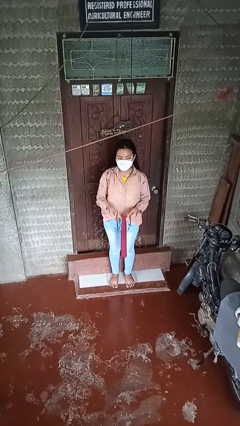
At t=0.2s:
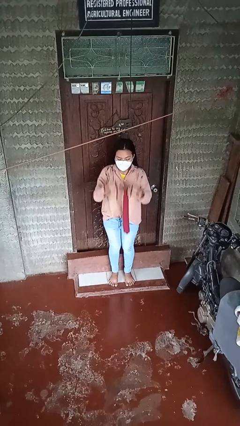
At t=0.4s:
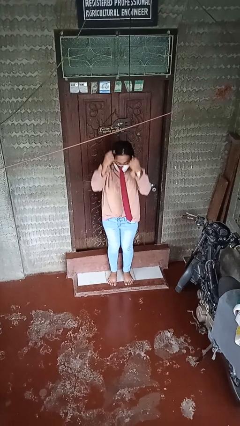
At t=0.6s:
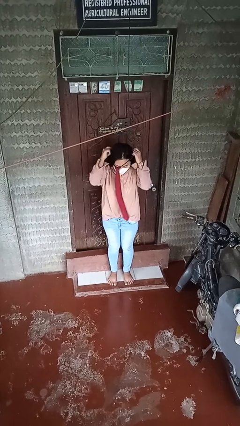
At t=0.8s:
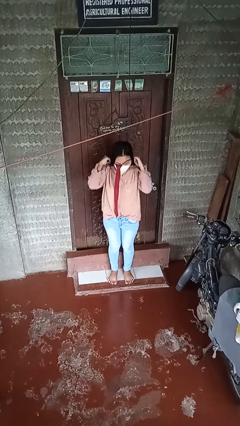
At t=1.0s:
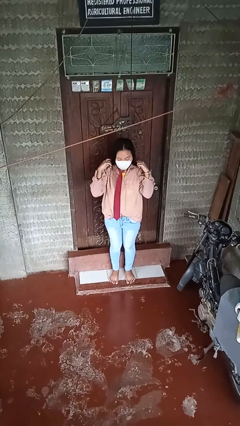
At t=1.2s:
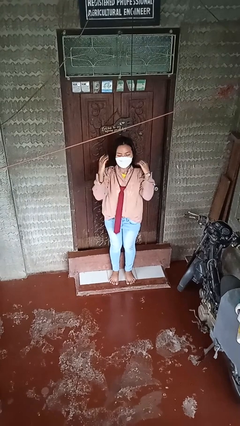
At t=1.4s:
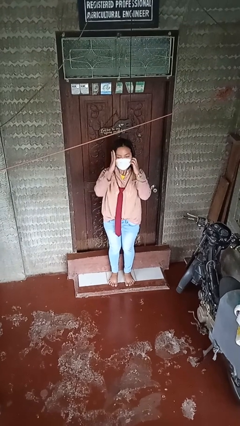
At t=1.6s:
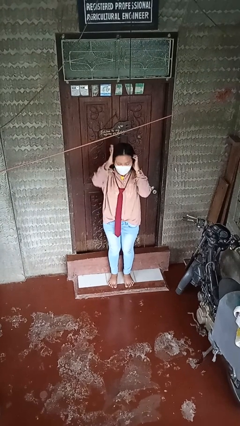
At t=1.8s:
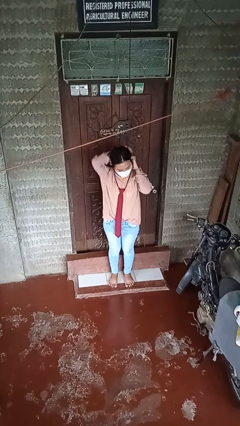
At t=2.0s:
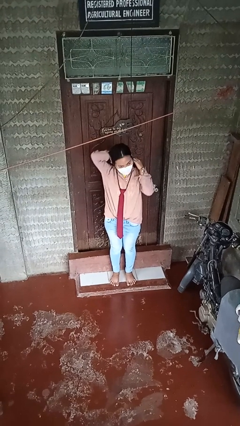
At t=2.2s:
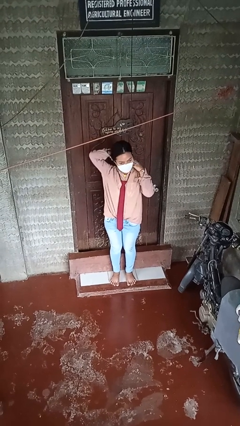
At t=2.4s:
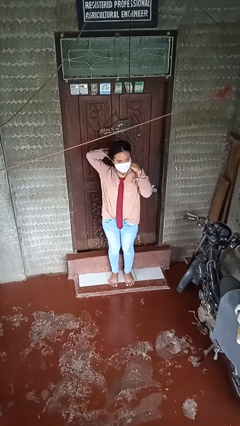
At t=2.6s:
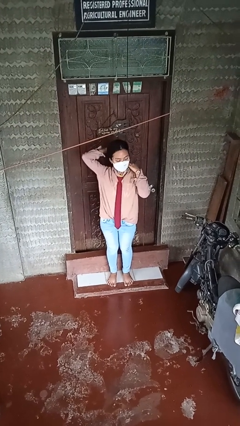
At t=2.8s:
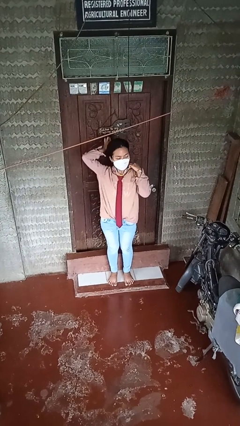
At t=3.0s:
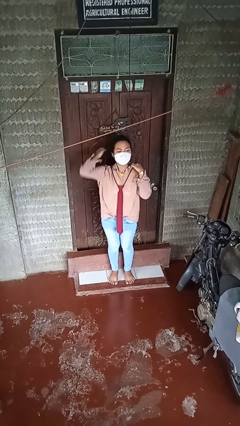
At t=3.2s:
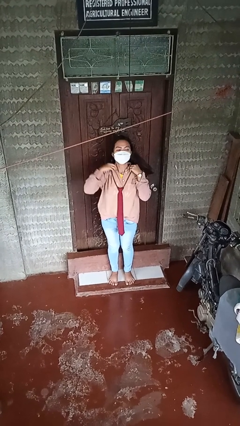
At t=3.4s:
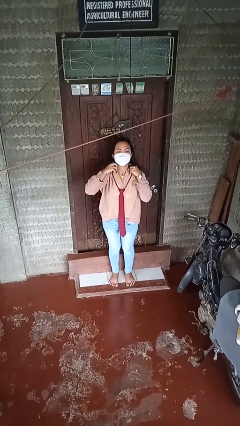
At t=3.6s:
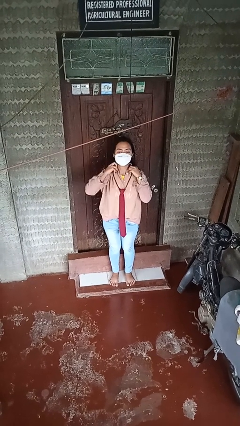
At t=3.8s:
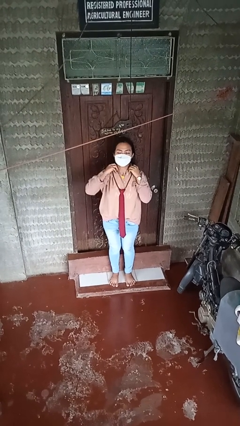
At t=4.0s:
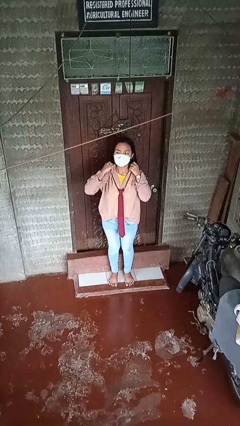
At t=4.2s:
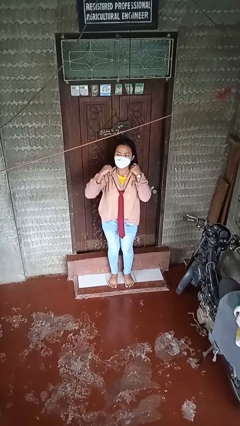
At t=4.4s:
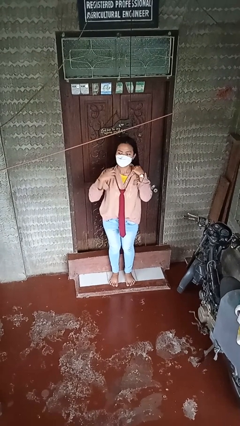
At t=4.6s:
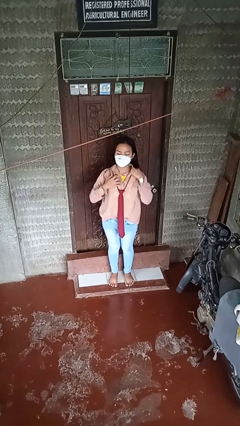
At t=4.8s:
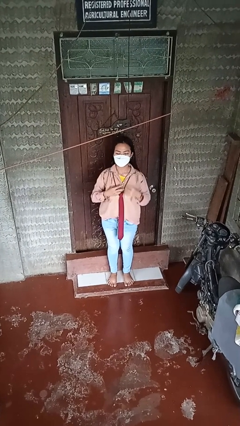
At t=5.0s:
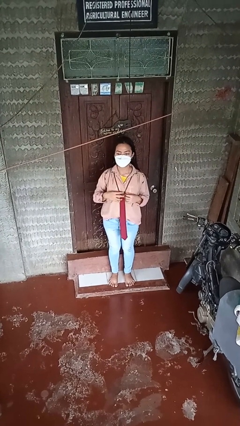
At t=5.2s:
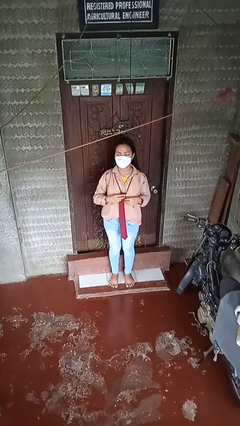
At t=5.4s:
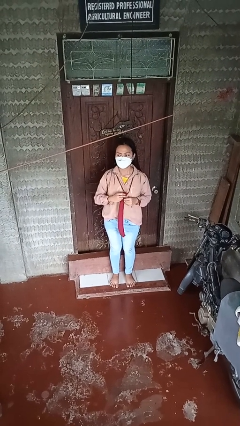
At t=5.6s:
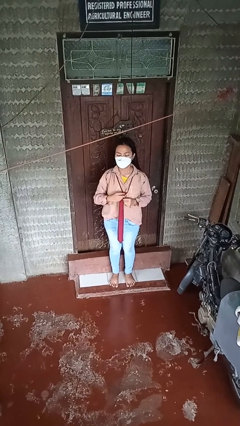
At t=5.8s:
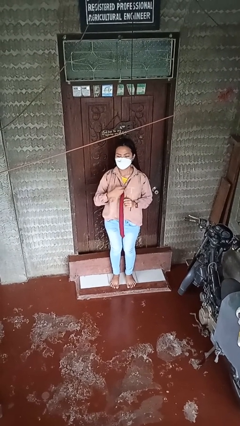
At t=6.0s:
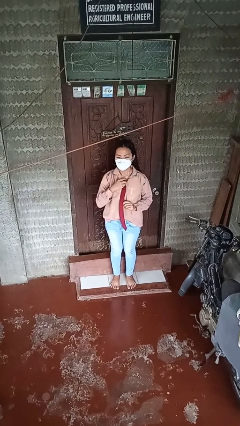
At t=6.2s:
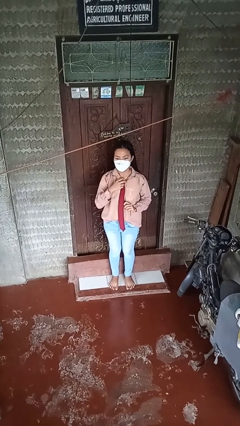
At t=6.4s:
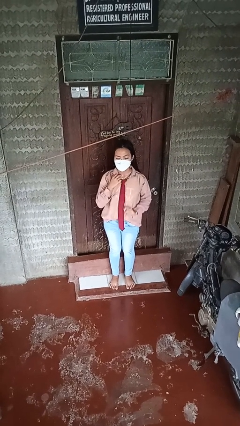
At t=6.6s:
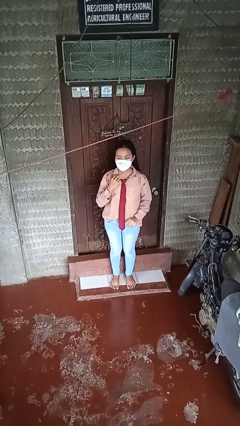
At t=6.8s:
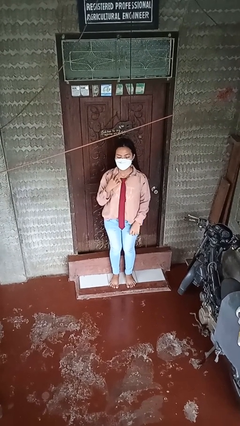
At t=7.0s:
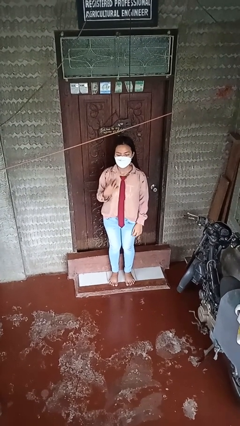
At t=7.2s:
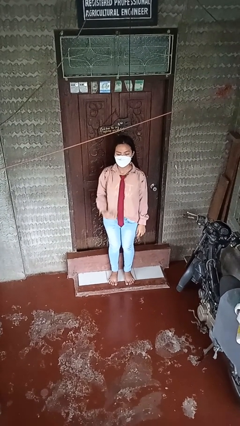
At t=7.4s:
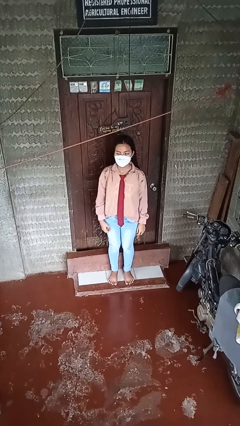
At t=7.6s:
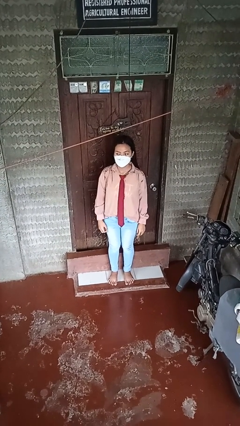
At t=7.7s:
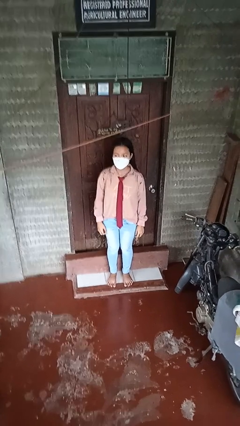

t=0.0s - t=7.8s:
person puts on necktie

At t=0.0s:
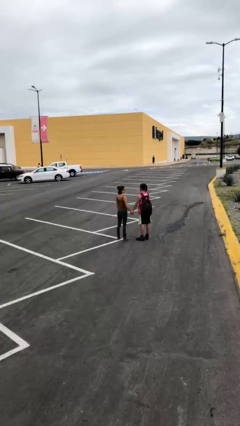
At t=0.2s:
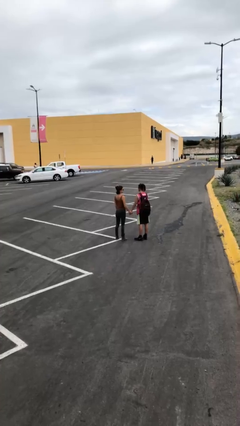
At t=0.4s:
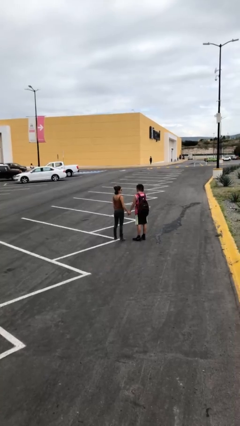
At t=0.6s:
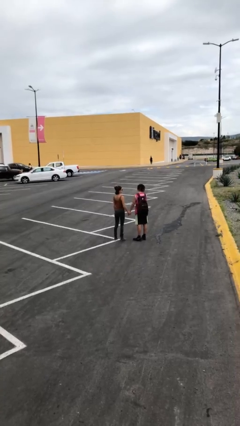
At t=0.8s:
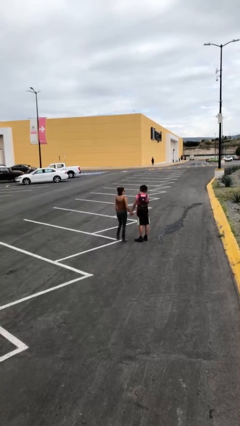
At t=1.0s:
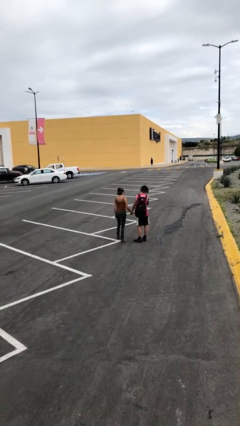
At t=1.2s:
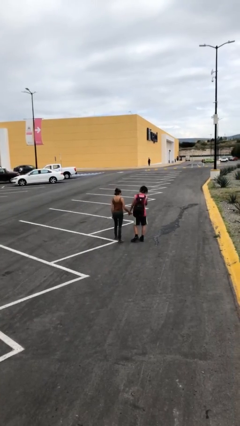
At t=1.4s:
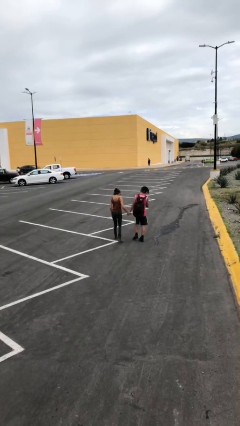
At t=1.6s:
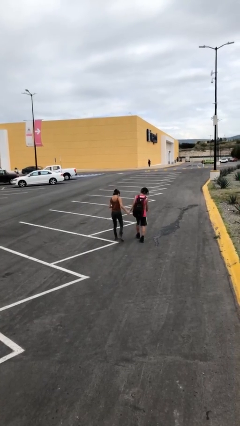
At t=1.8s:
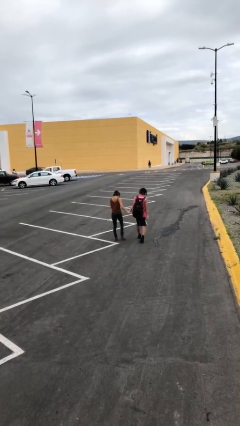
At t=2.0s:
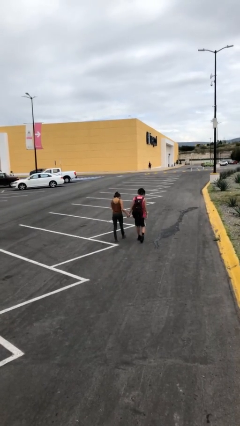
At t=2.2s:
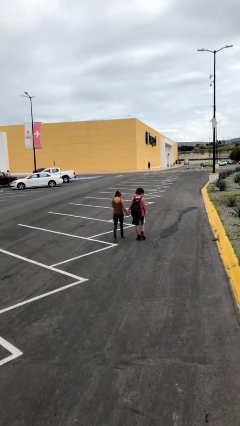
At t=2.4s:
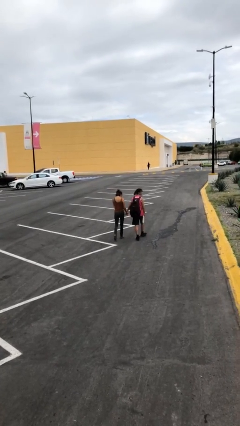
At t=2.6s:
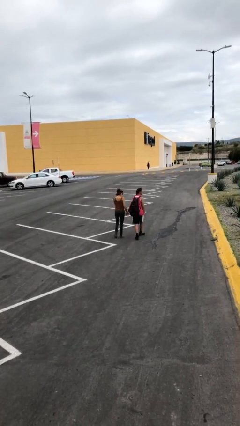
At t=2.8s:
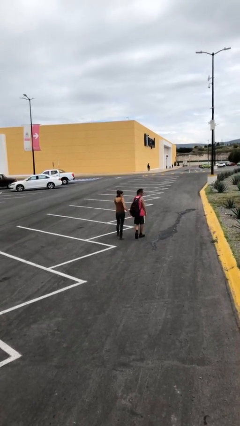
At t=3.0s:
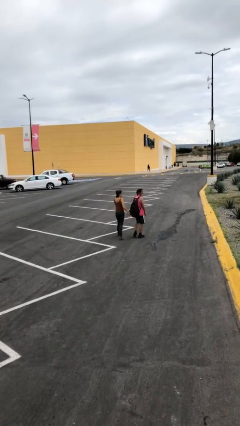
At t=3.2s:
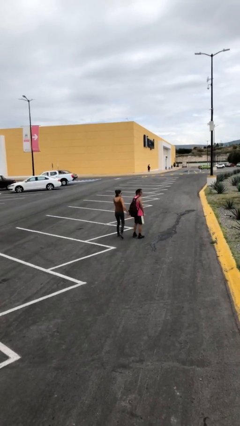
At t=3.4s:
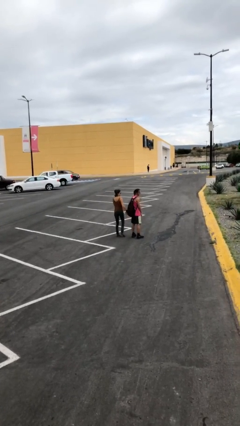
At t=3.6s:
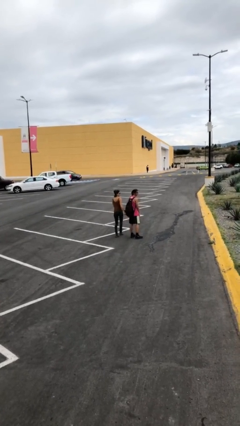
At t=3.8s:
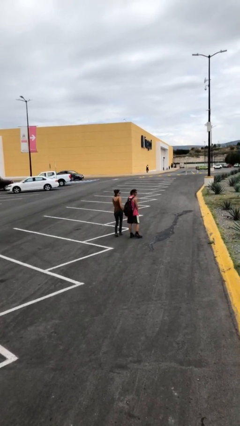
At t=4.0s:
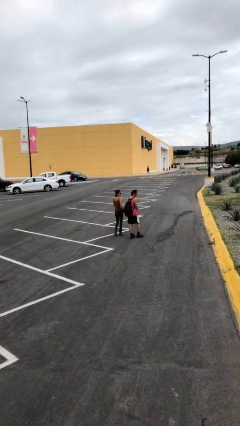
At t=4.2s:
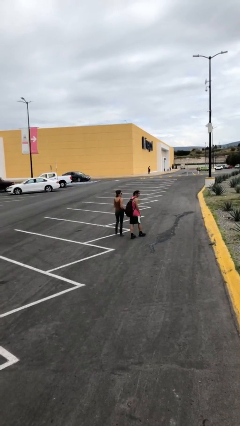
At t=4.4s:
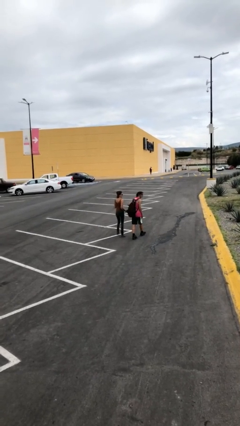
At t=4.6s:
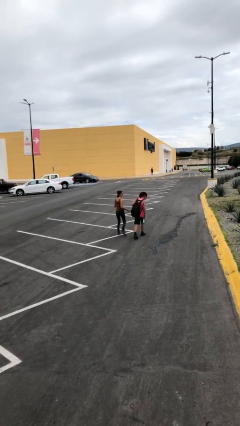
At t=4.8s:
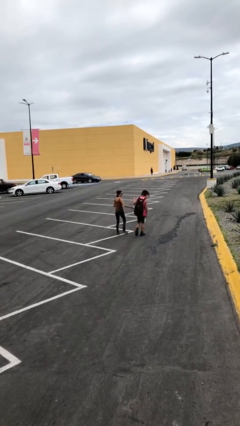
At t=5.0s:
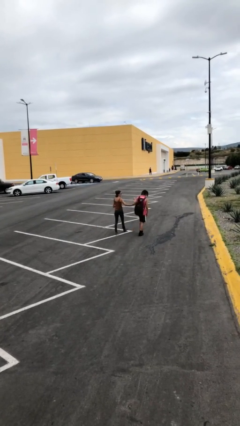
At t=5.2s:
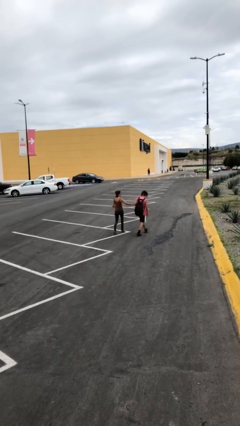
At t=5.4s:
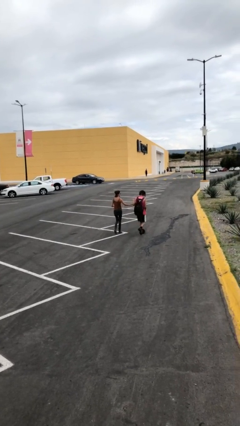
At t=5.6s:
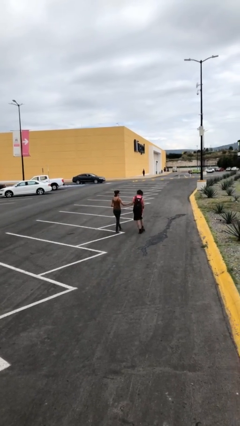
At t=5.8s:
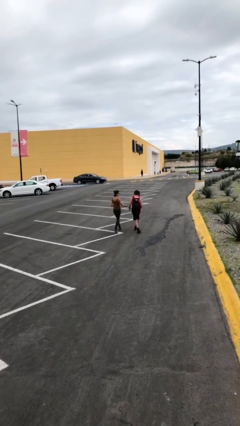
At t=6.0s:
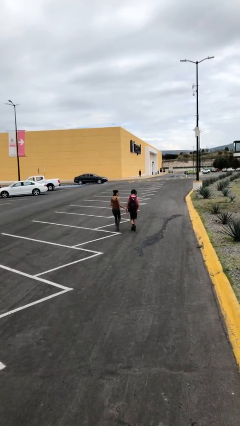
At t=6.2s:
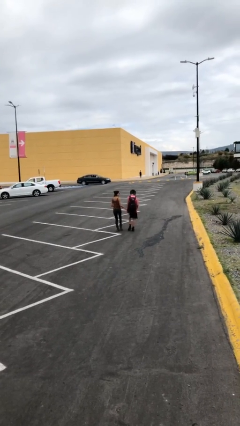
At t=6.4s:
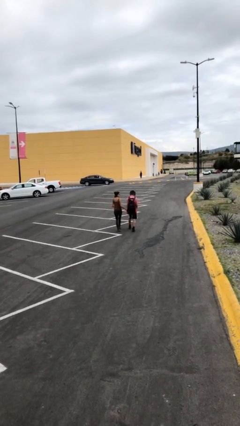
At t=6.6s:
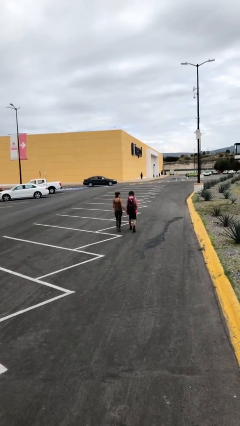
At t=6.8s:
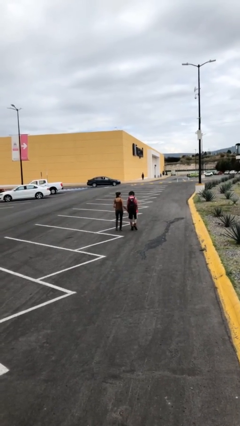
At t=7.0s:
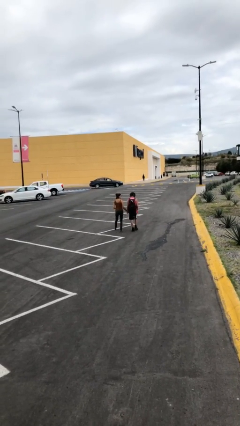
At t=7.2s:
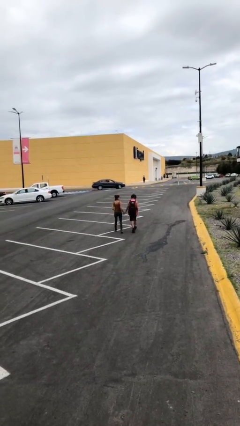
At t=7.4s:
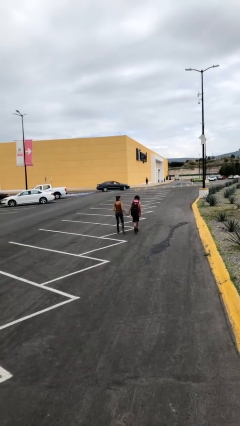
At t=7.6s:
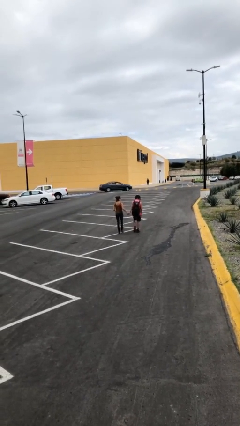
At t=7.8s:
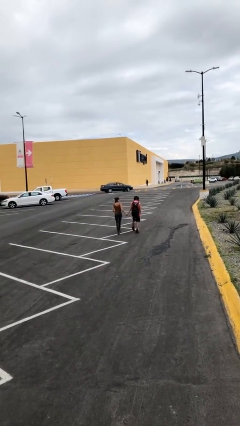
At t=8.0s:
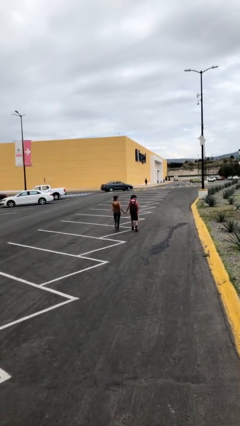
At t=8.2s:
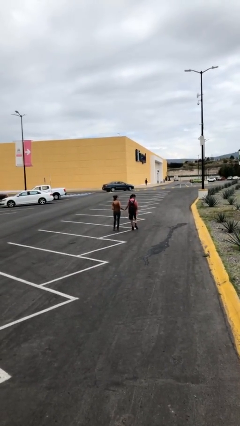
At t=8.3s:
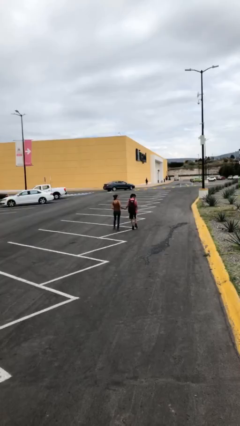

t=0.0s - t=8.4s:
person holds hand

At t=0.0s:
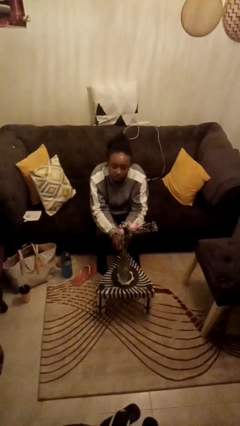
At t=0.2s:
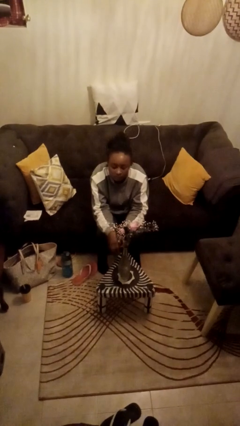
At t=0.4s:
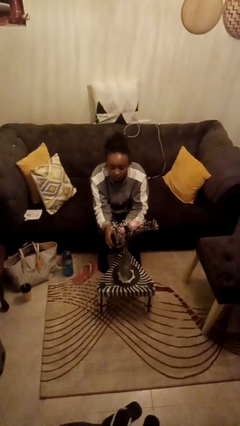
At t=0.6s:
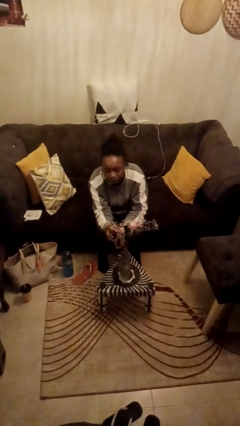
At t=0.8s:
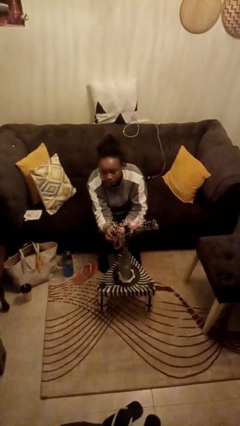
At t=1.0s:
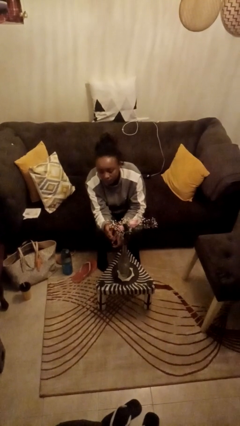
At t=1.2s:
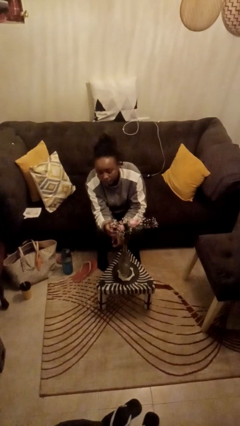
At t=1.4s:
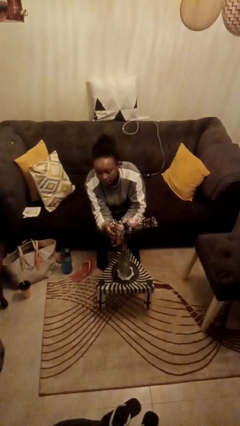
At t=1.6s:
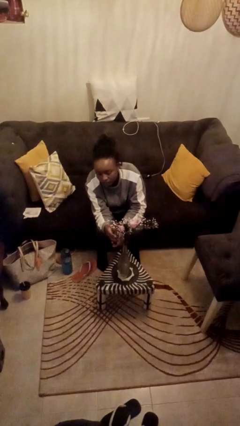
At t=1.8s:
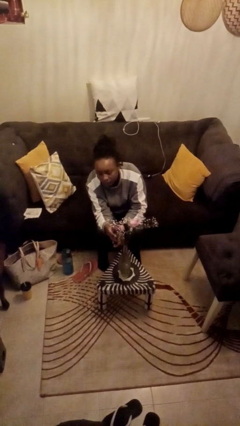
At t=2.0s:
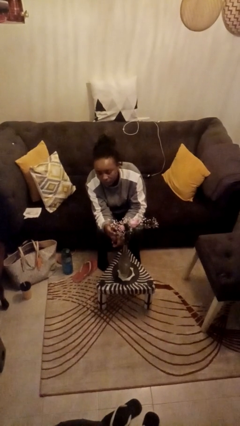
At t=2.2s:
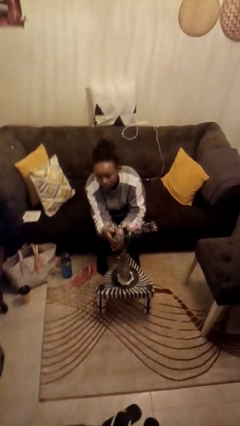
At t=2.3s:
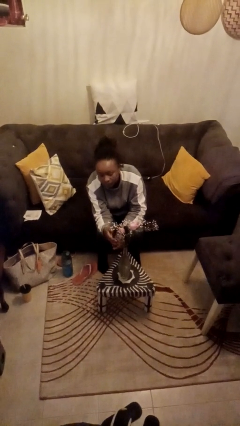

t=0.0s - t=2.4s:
person arranges flowers in vase
